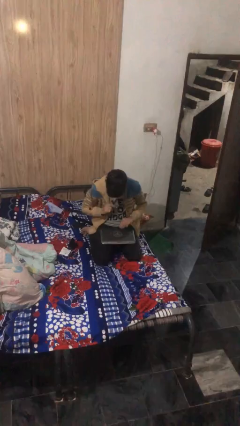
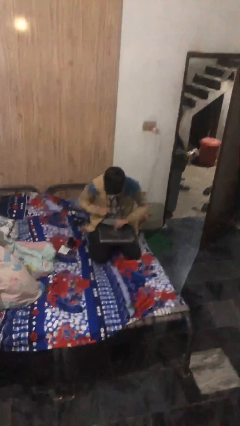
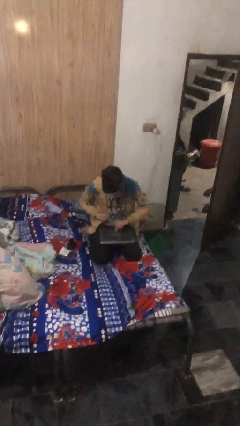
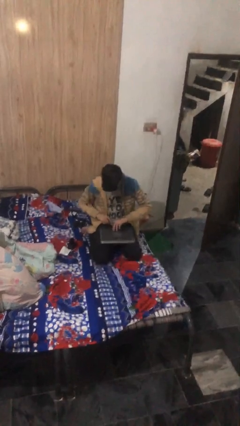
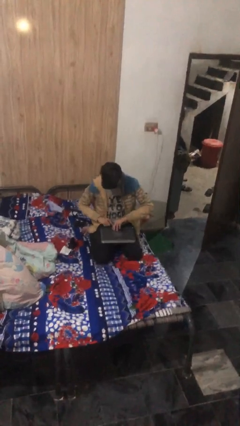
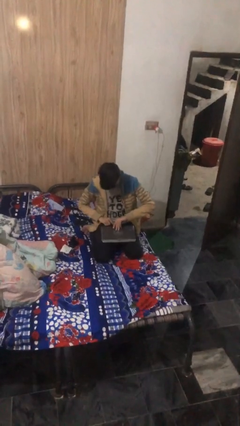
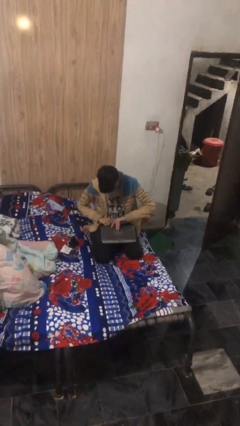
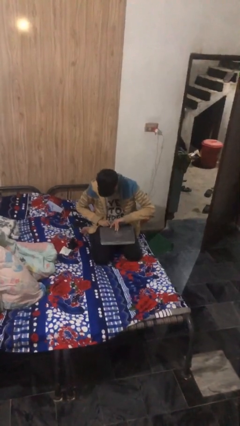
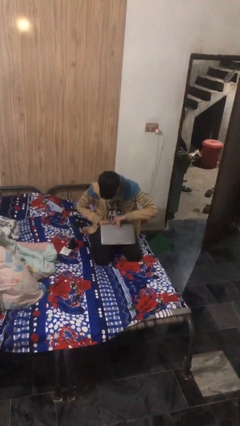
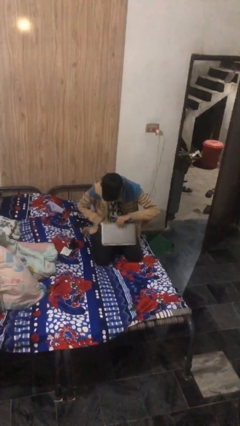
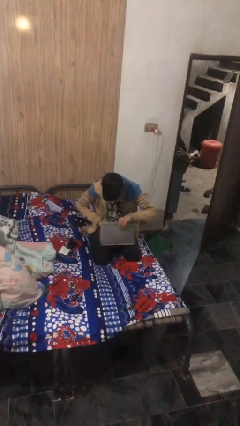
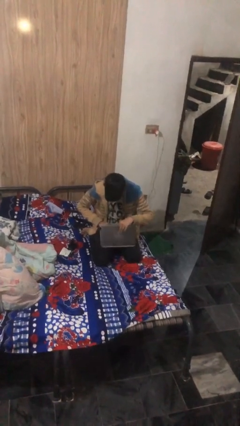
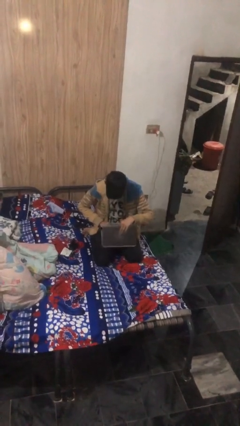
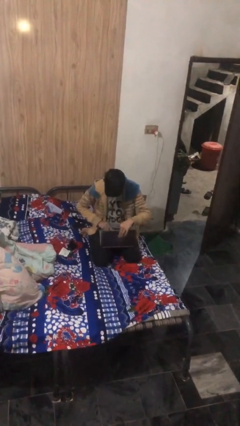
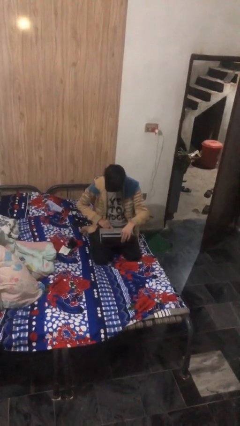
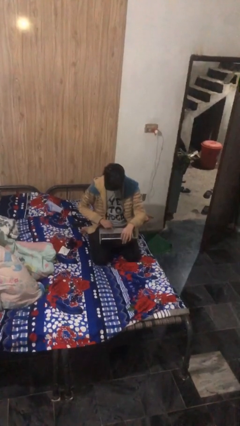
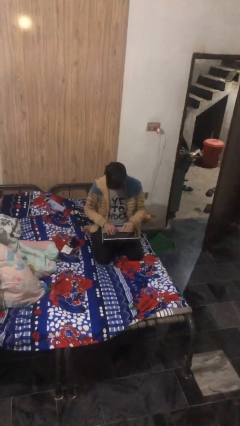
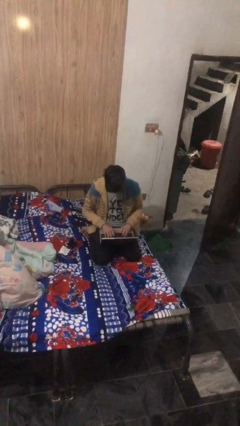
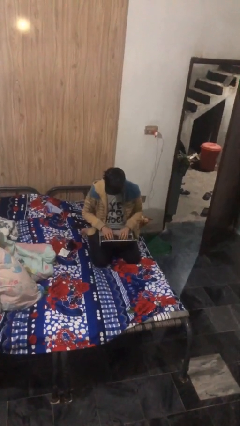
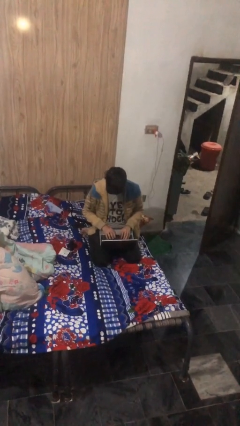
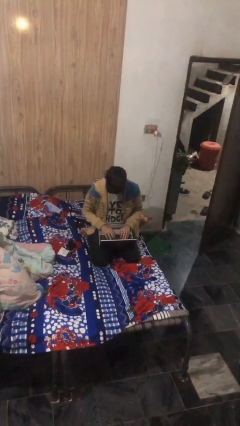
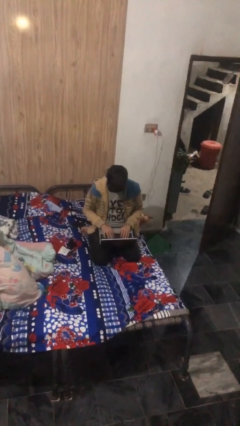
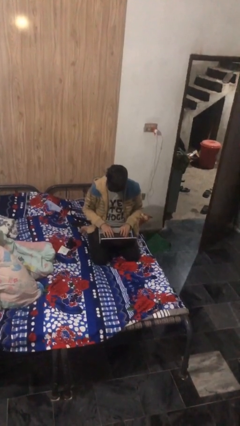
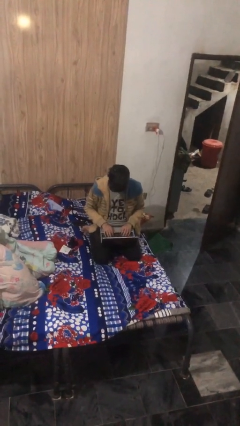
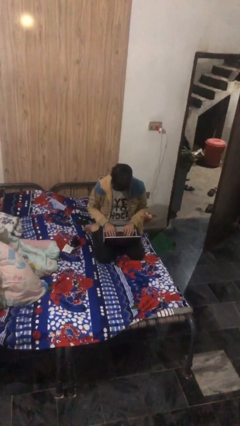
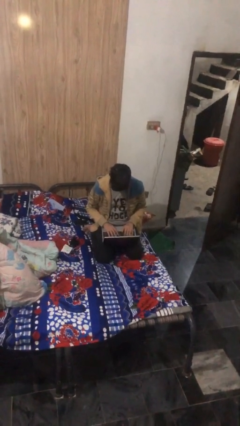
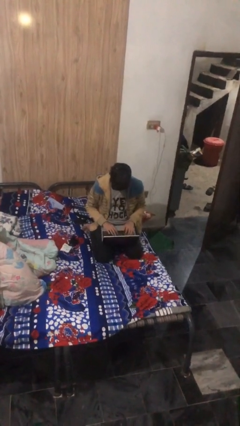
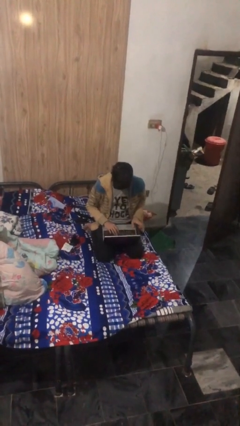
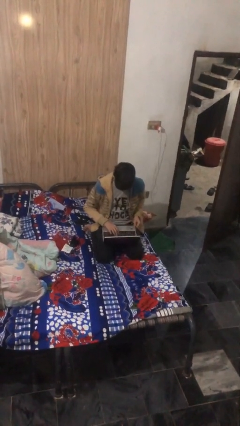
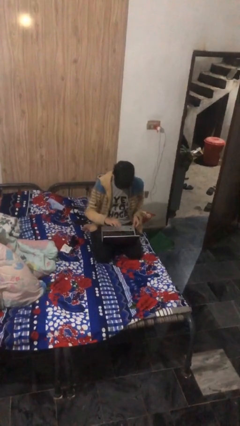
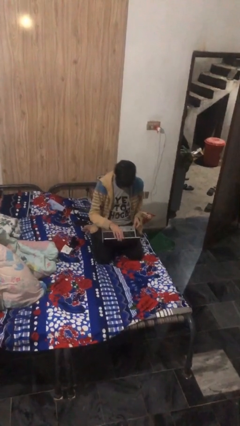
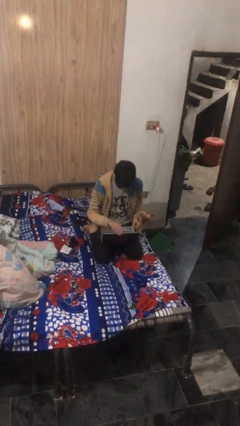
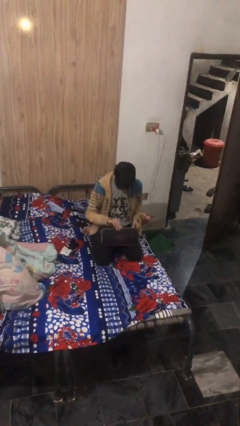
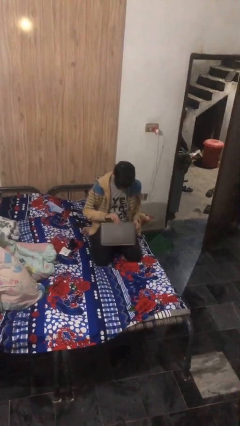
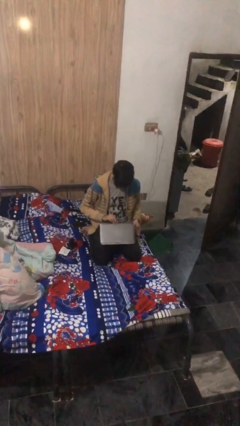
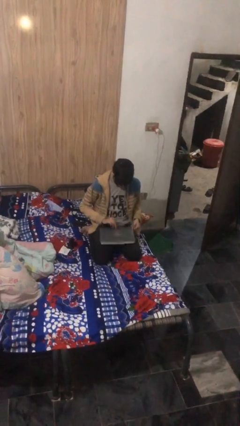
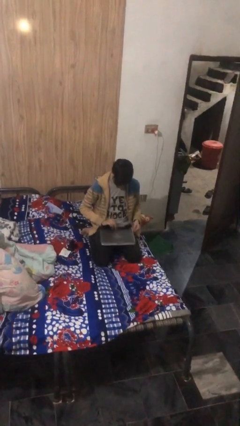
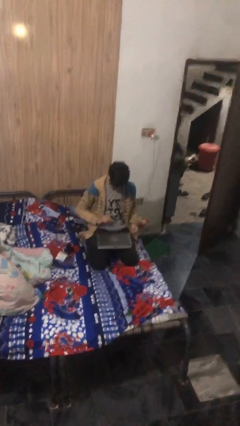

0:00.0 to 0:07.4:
person interacts with laptop

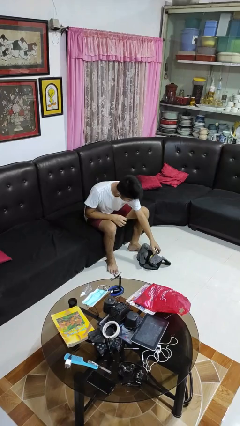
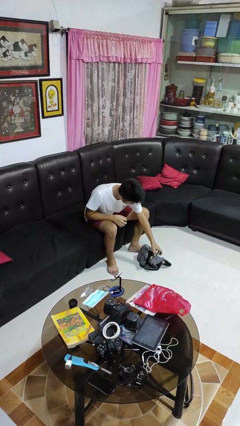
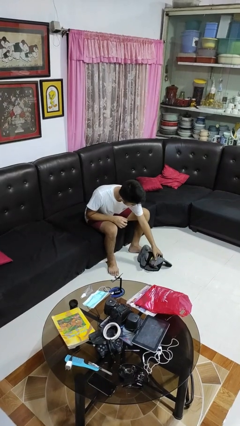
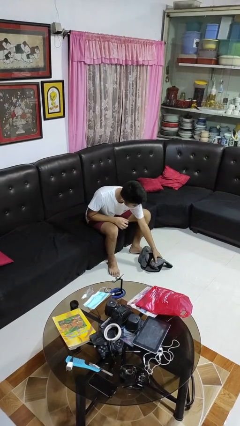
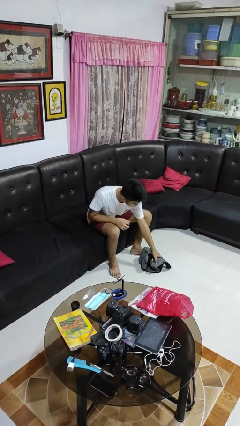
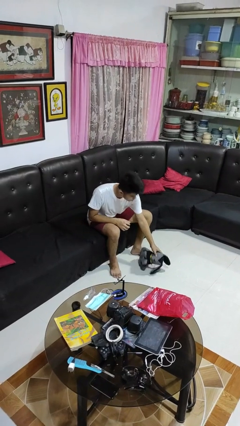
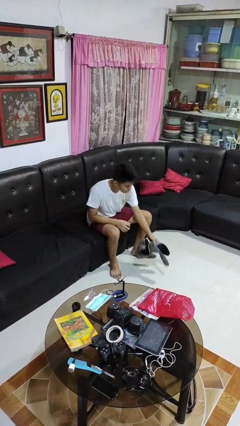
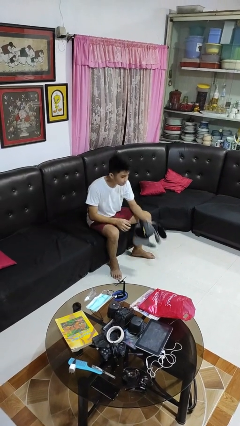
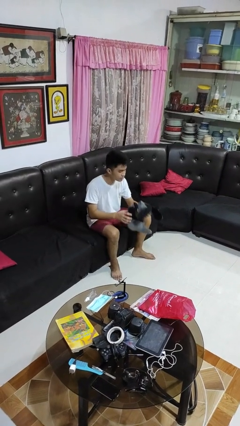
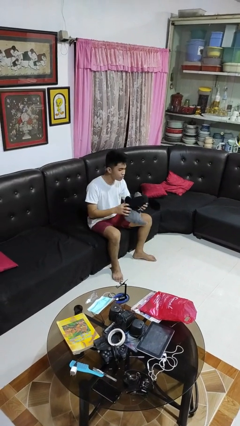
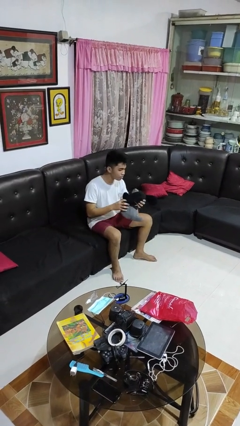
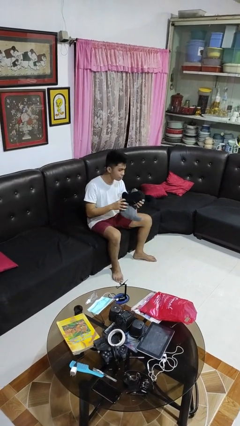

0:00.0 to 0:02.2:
person picks up object from floor

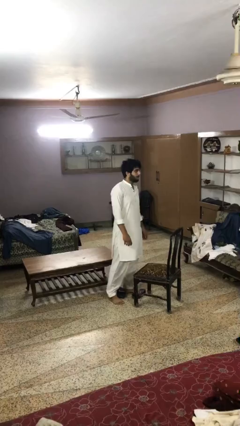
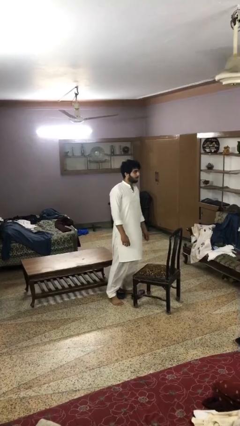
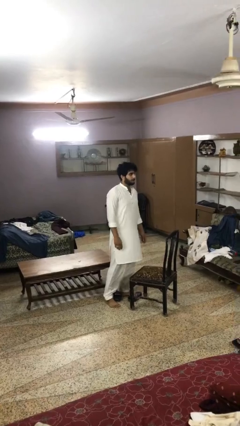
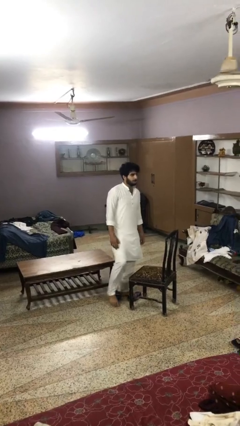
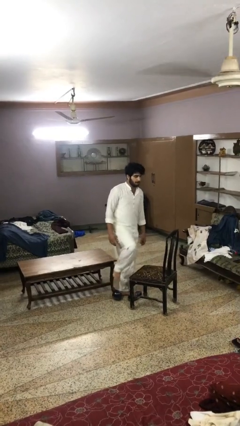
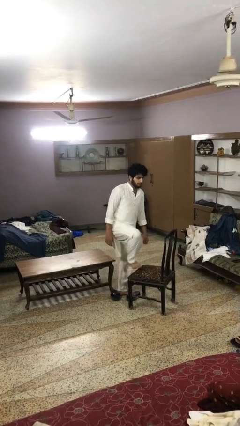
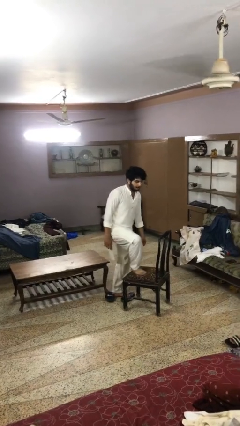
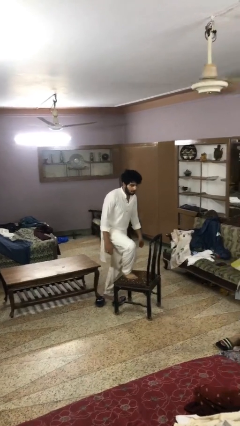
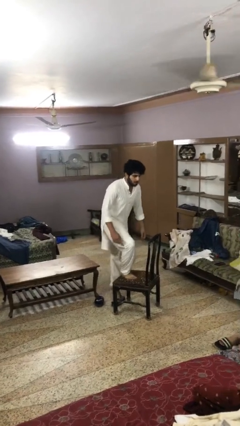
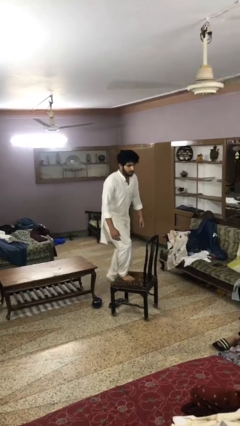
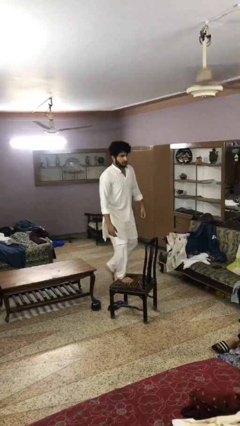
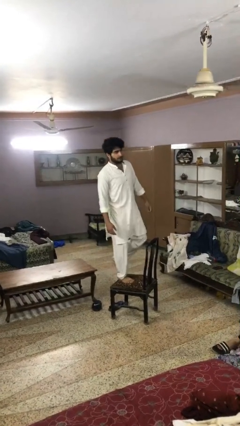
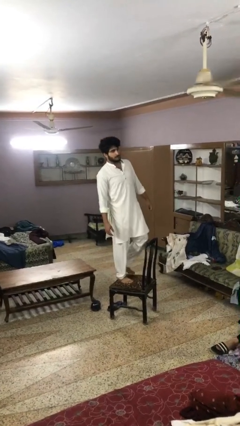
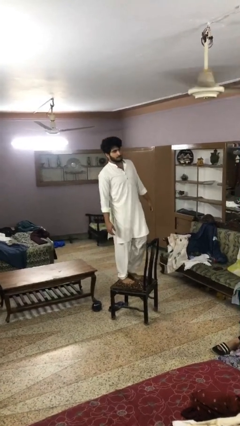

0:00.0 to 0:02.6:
person climbs on chair

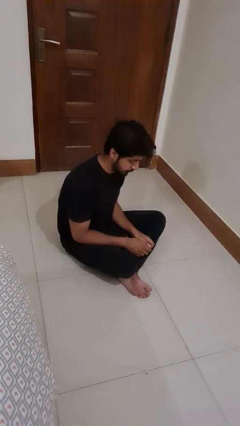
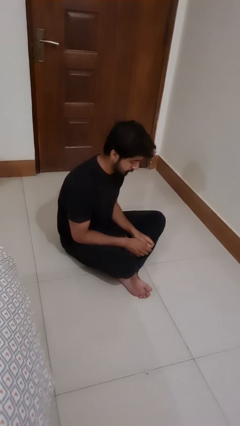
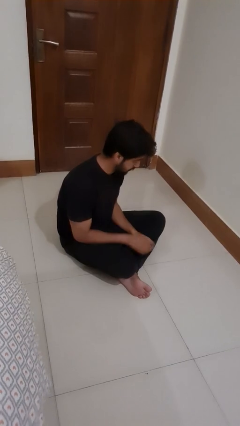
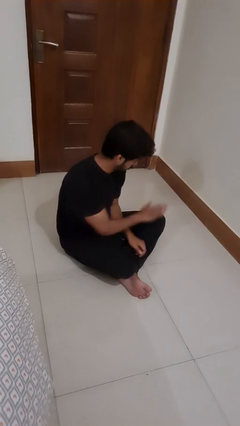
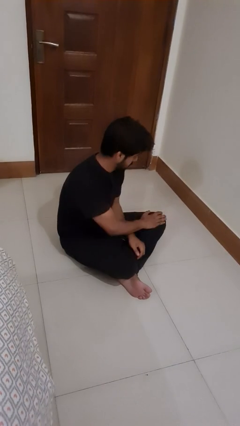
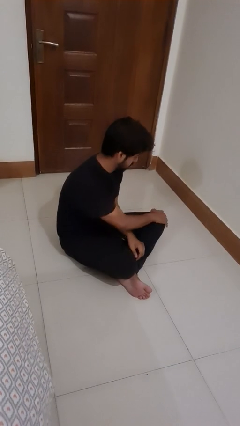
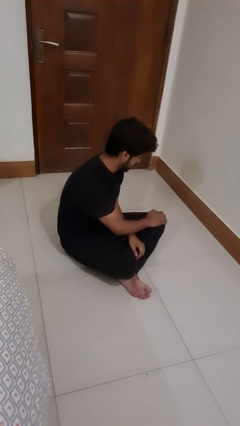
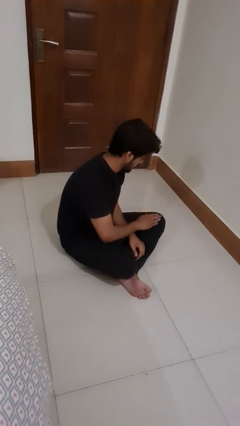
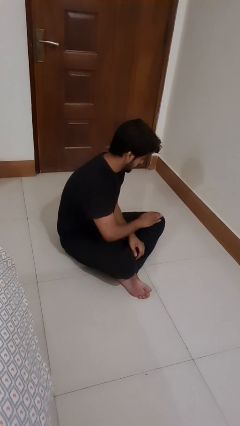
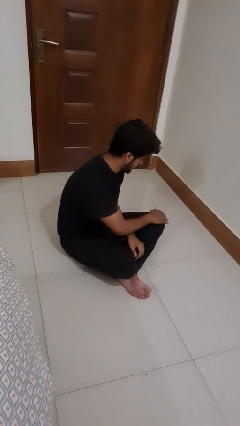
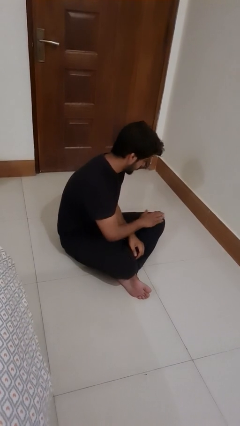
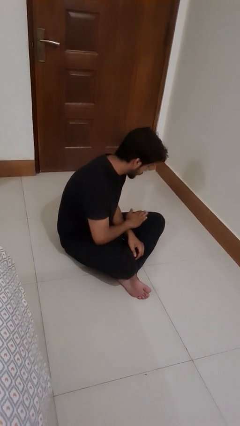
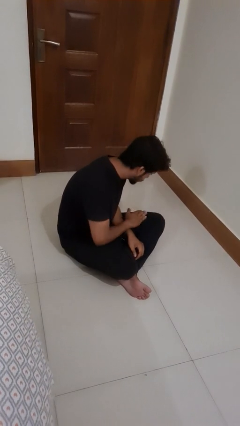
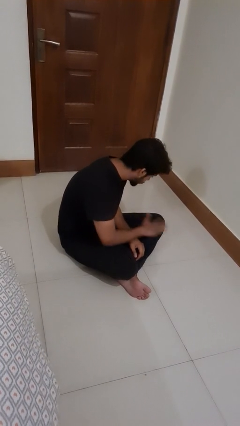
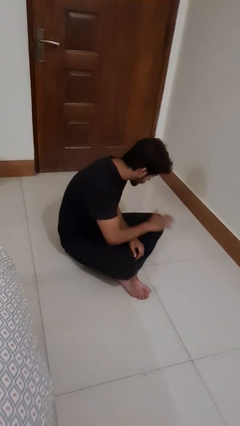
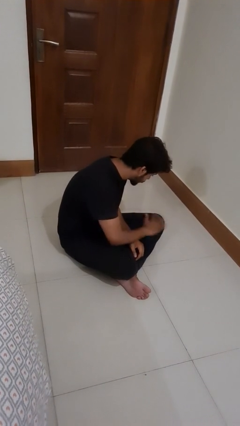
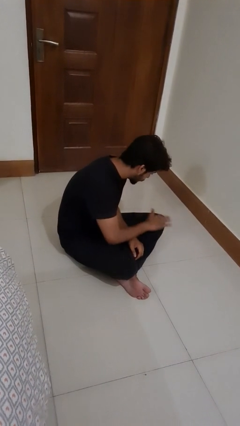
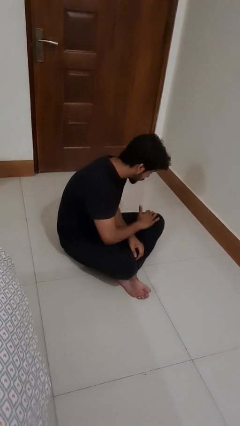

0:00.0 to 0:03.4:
person swats bug

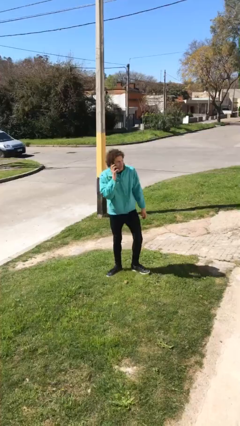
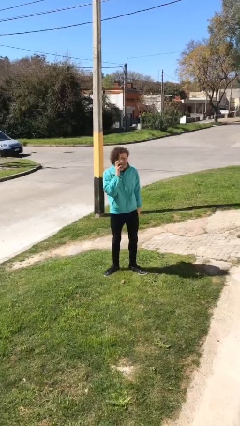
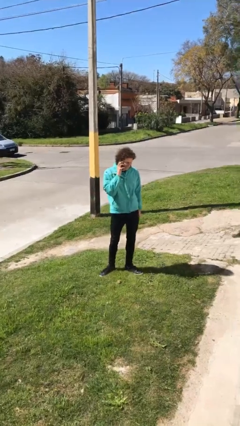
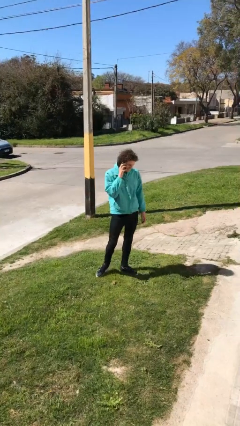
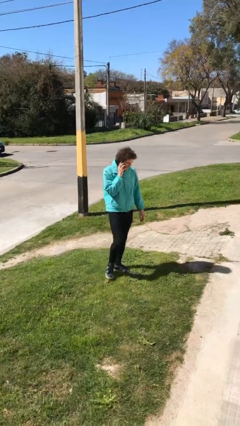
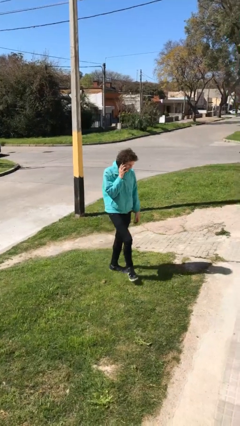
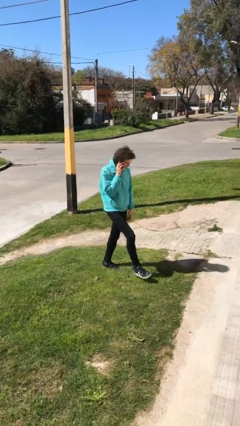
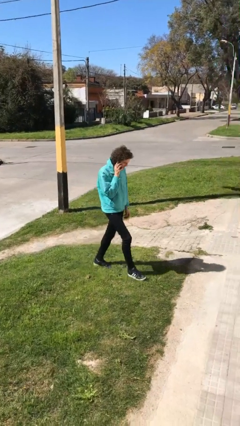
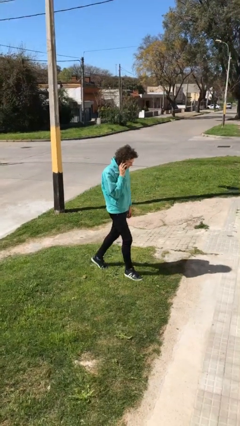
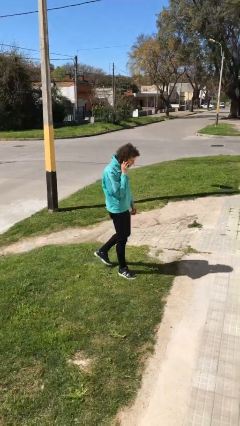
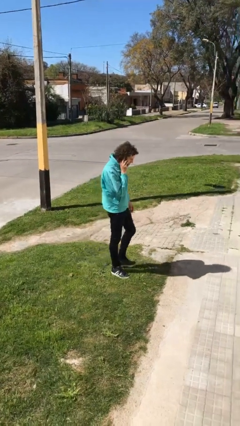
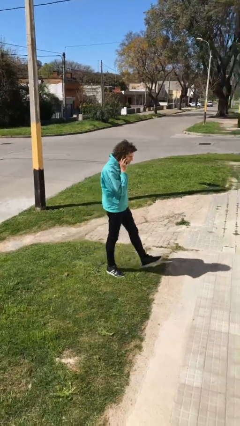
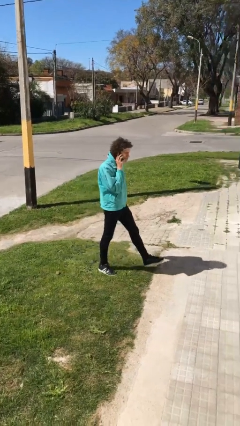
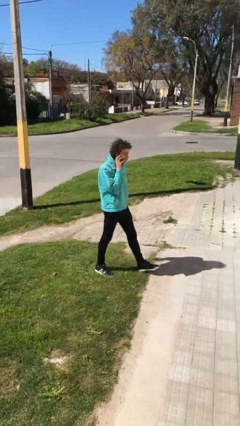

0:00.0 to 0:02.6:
person talks on phone
